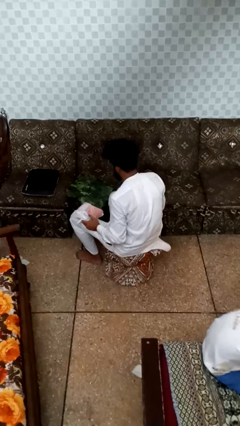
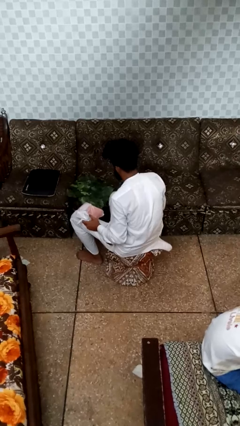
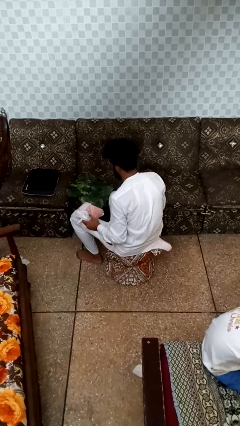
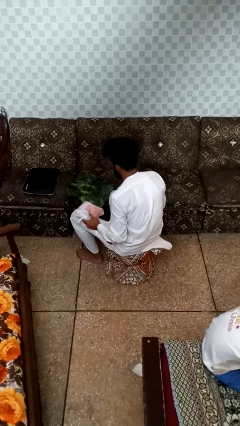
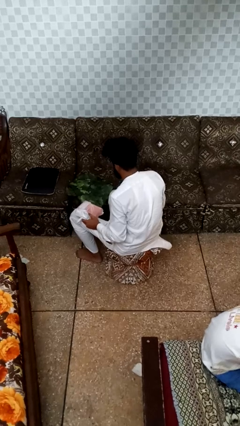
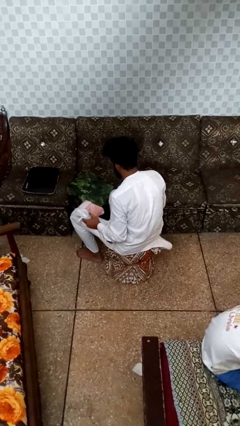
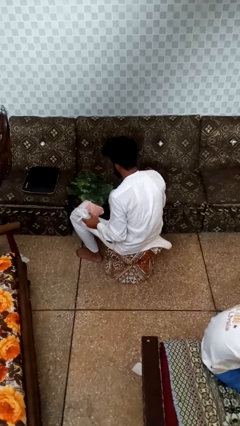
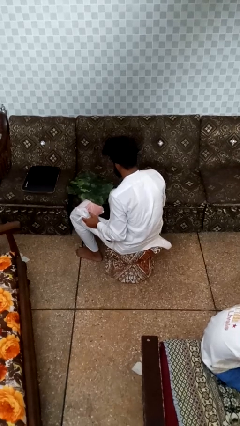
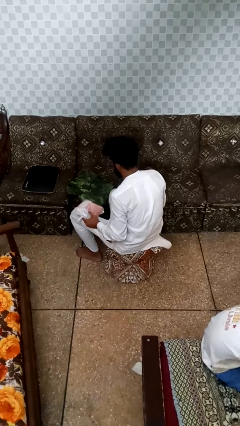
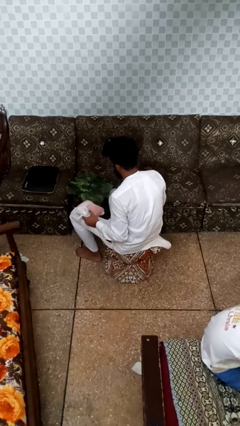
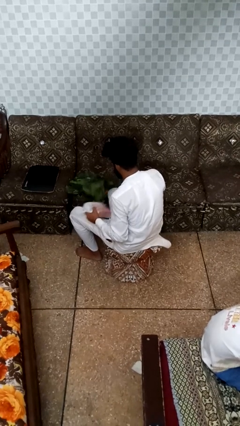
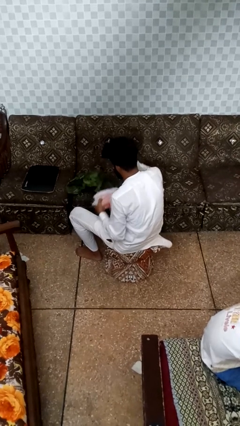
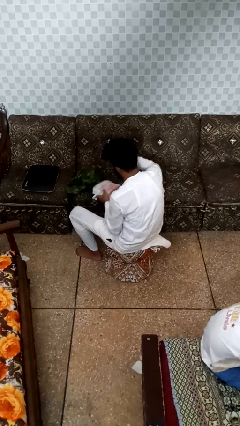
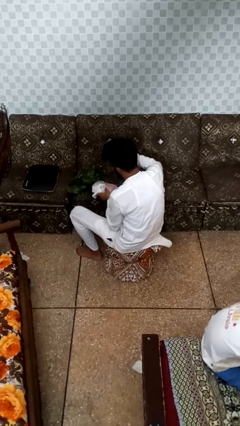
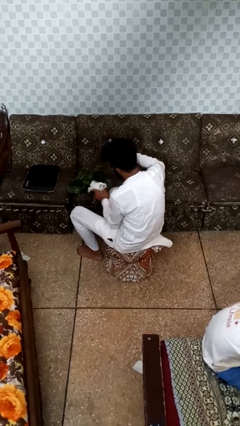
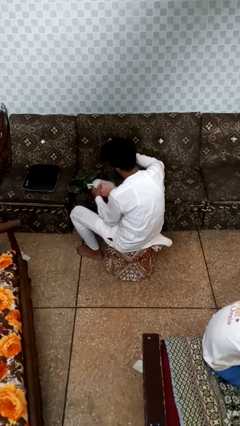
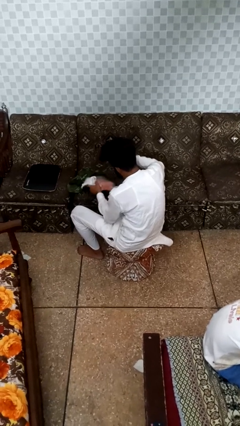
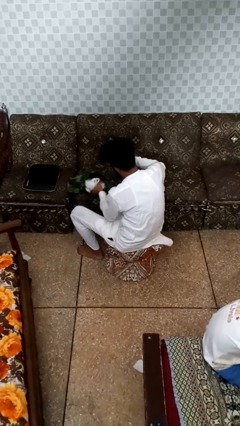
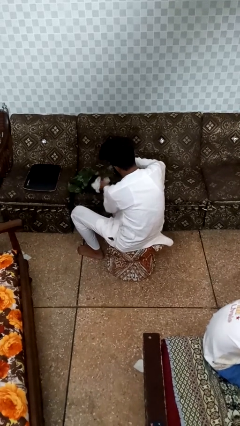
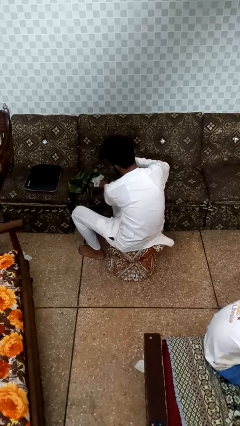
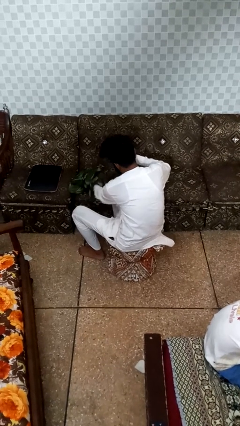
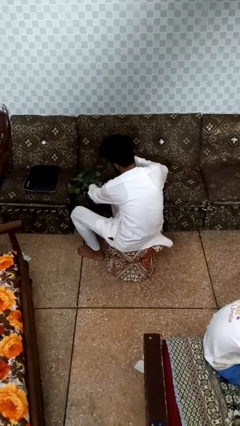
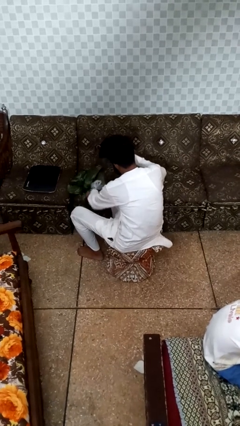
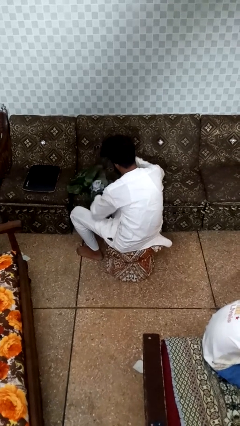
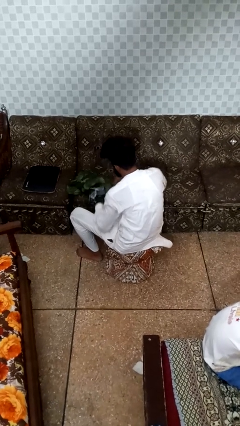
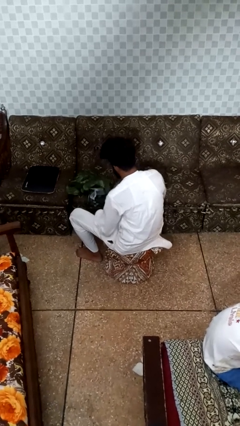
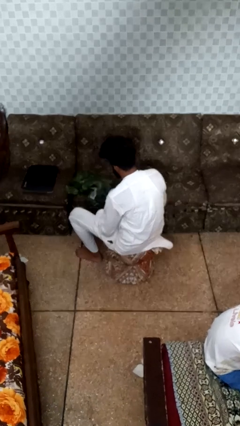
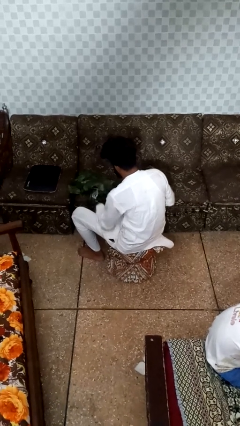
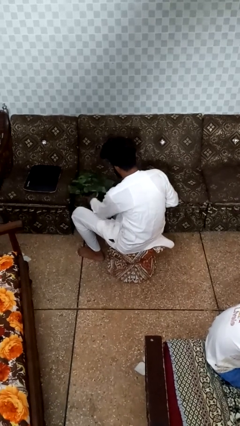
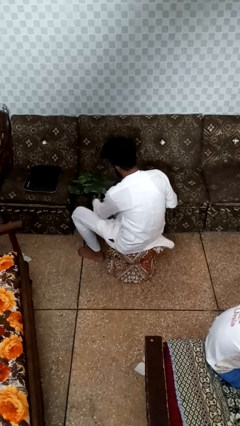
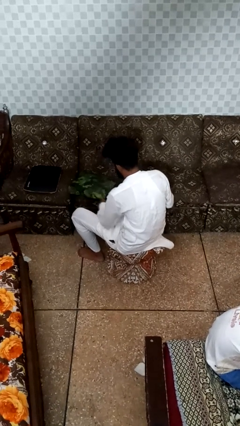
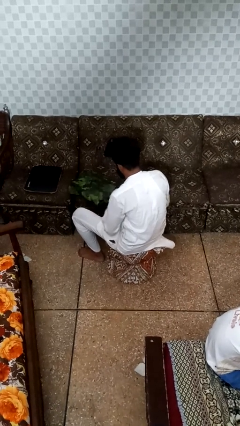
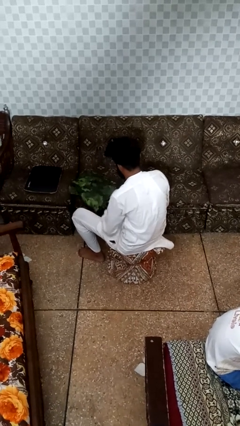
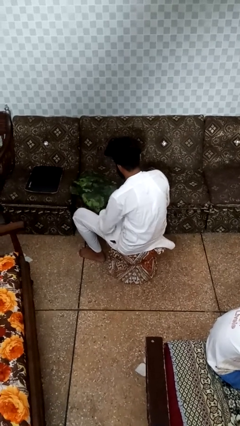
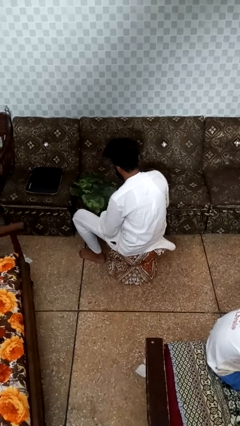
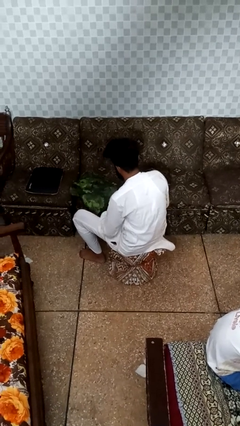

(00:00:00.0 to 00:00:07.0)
person puts object into bag

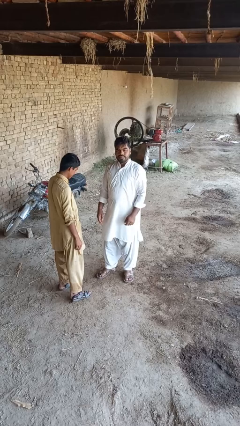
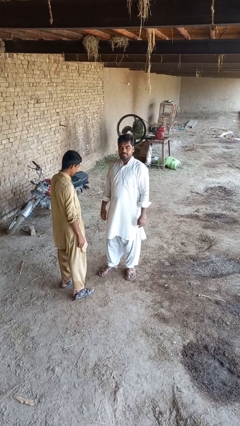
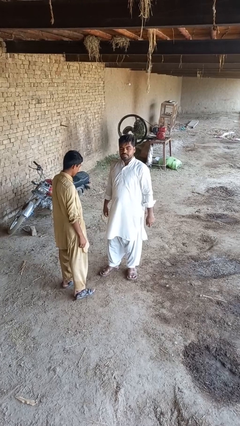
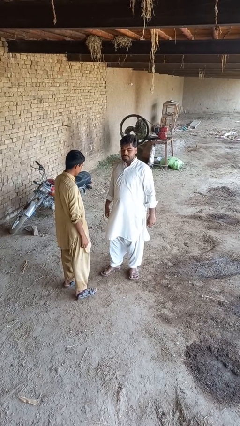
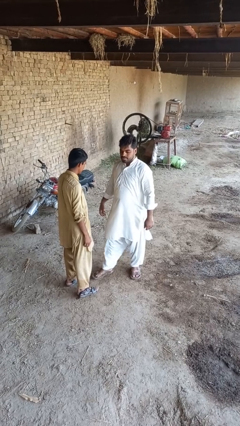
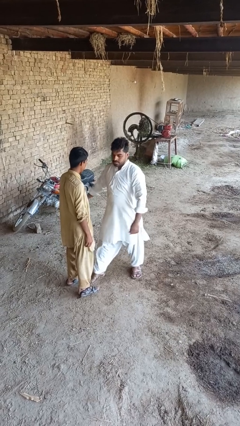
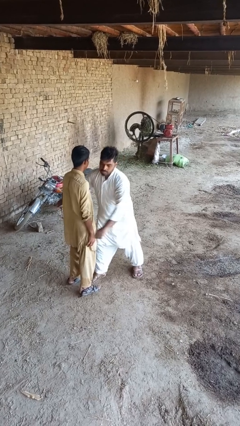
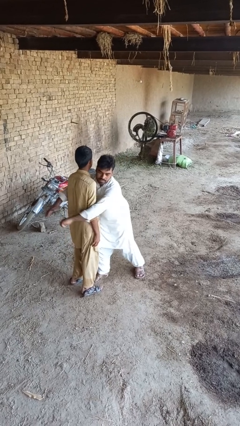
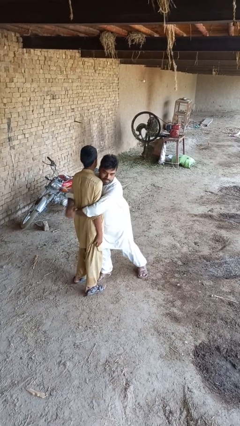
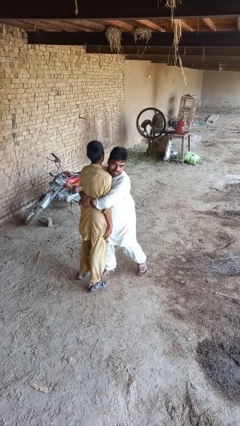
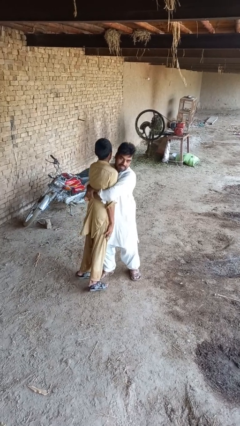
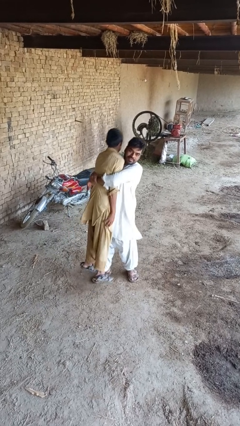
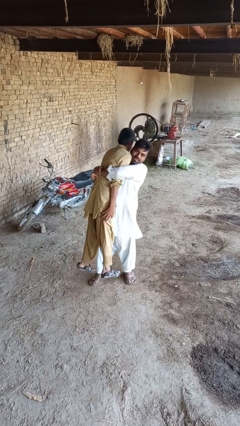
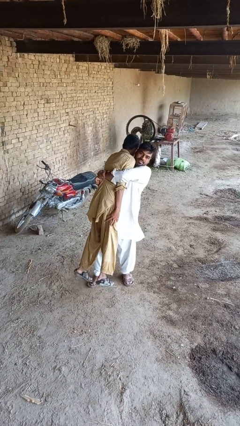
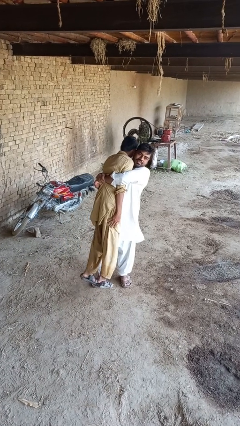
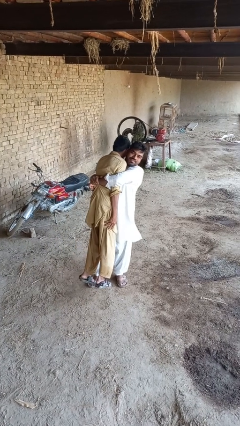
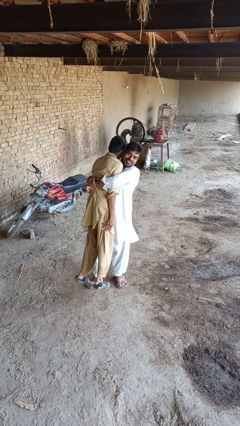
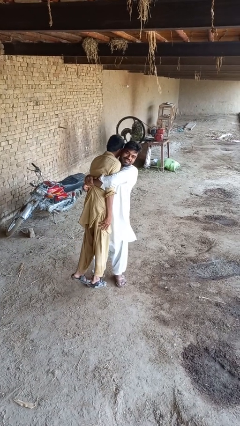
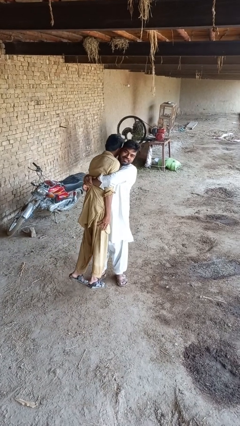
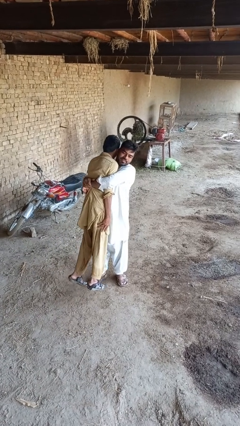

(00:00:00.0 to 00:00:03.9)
person picks up person

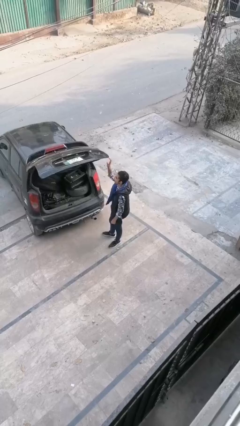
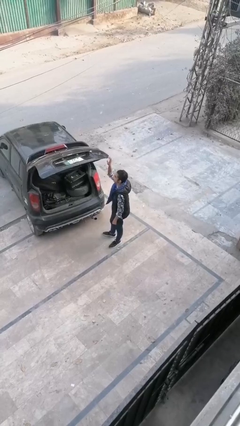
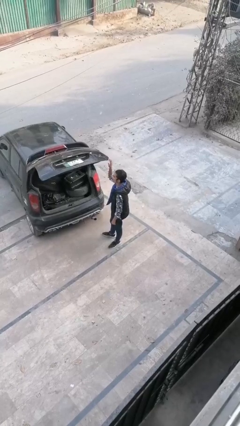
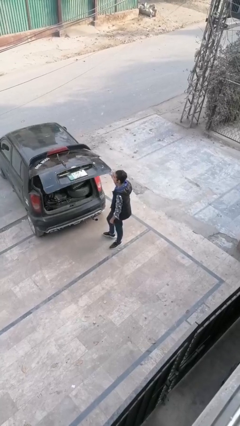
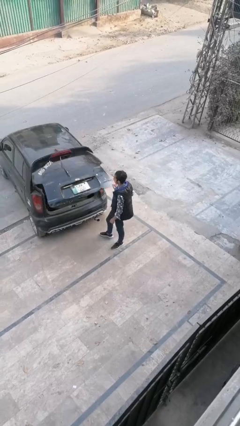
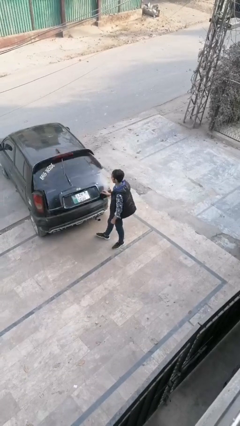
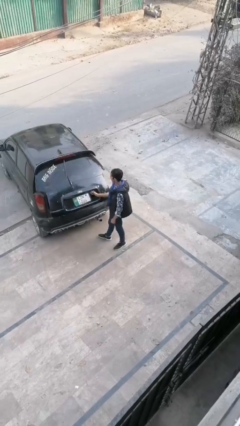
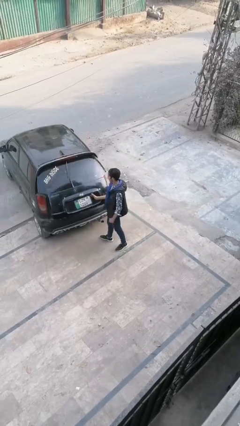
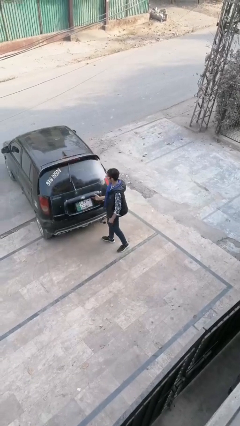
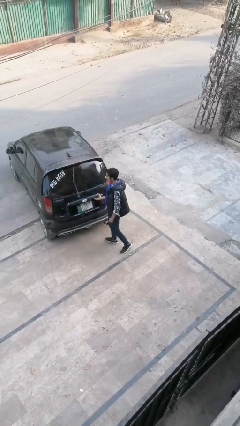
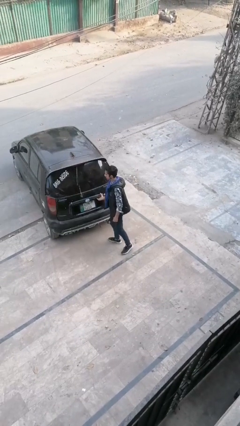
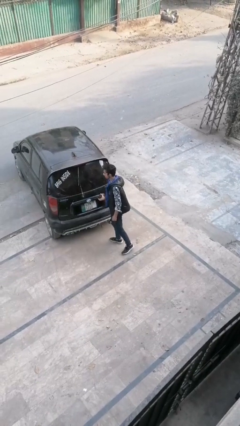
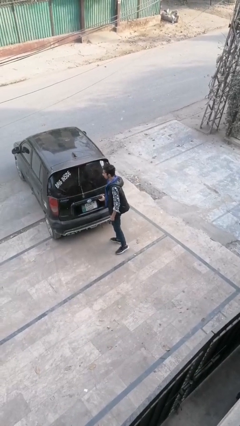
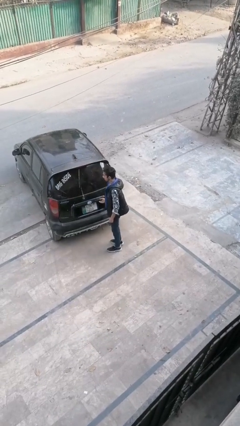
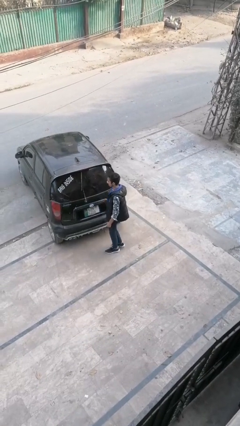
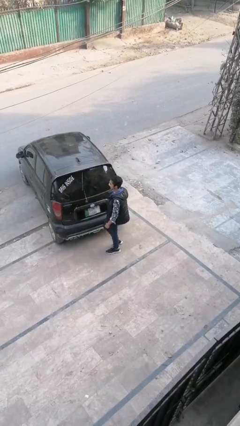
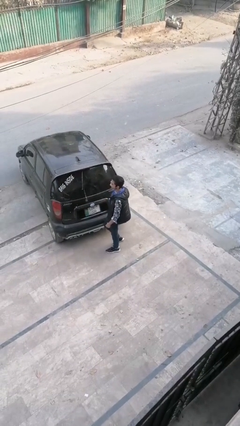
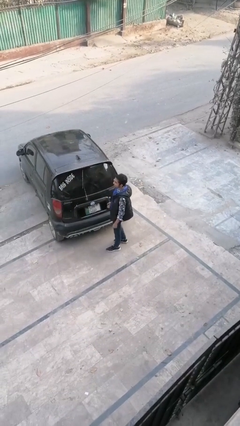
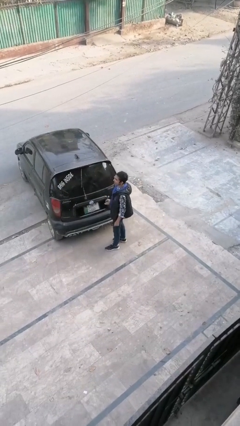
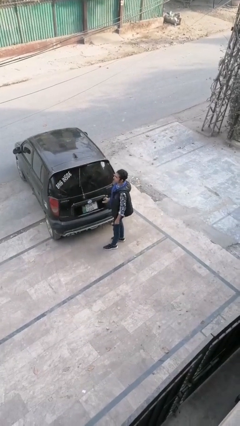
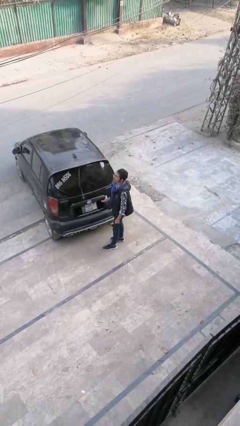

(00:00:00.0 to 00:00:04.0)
person closes car trunk

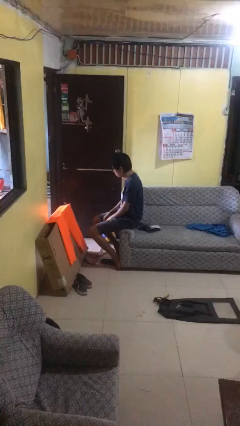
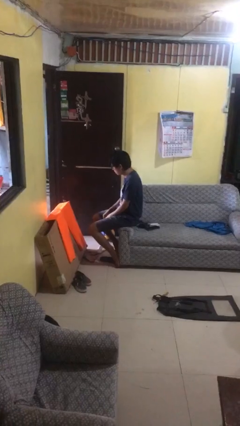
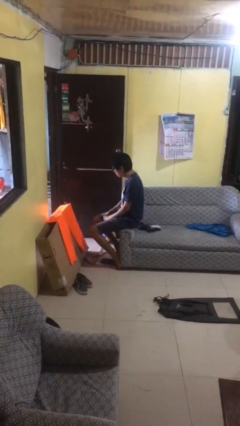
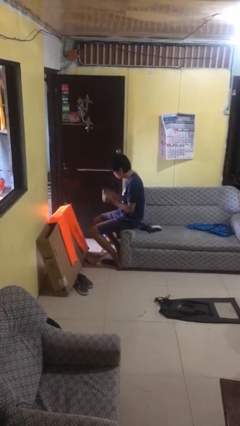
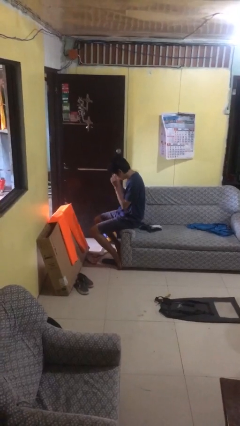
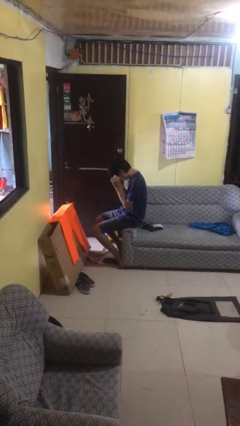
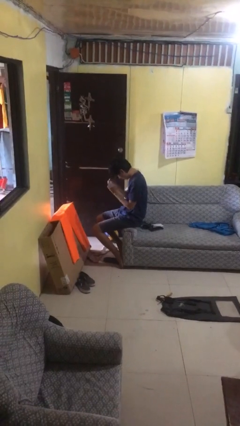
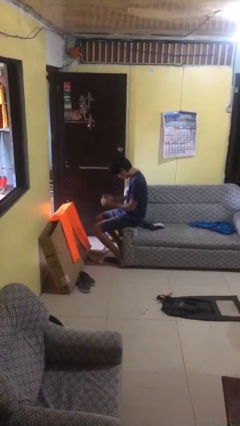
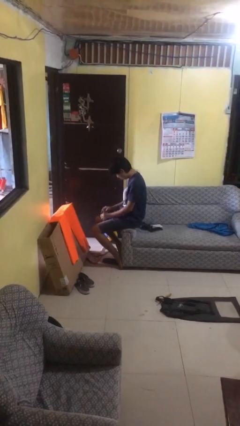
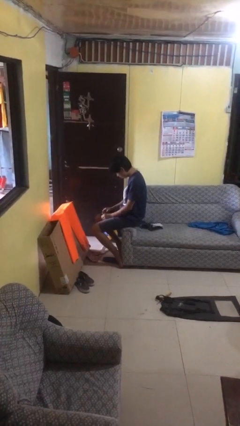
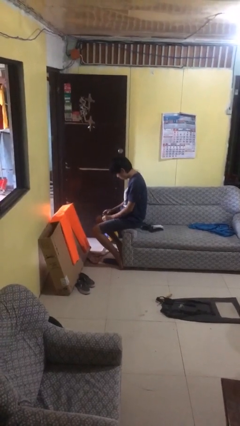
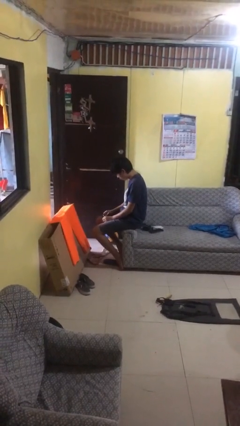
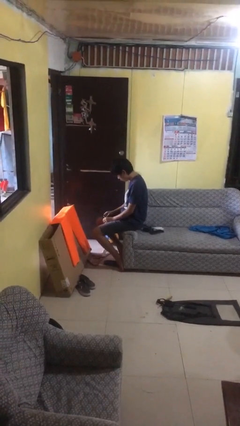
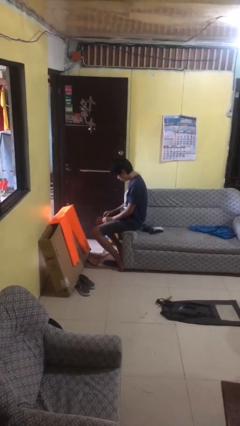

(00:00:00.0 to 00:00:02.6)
person takes off glasses

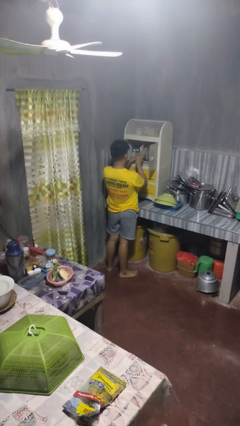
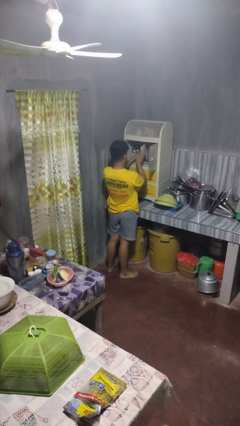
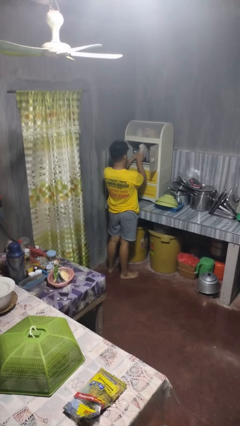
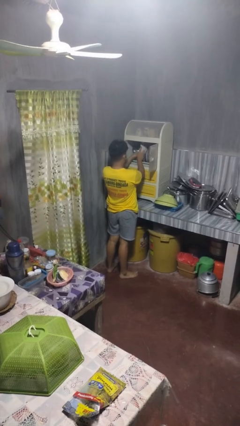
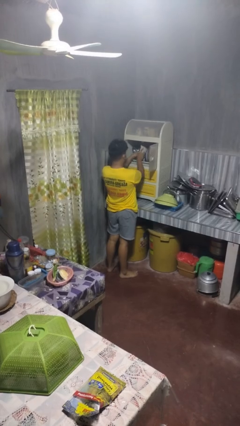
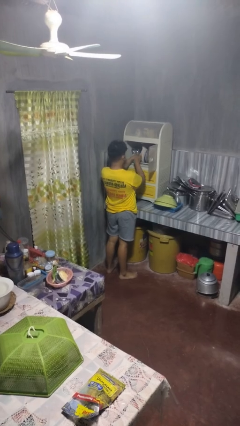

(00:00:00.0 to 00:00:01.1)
person puts object in cabinet
